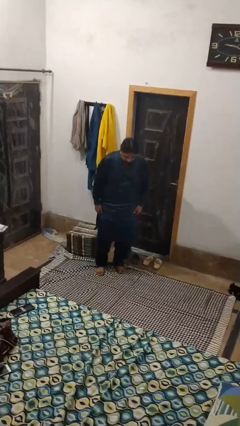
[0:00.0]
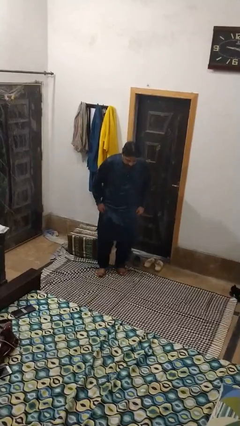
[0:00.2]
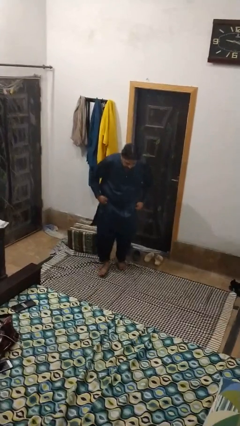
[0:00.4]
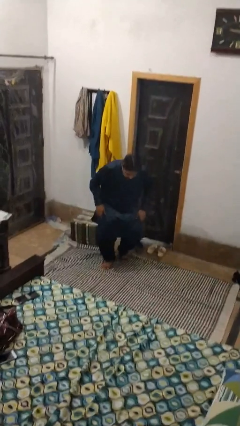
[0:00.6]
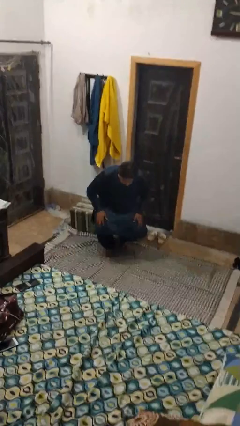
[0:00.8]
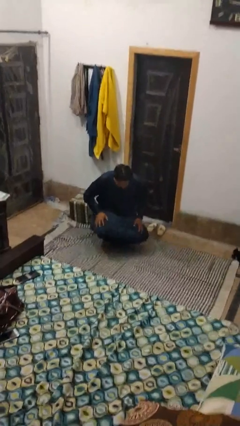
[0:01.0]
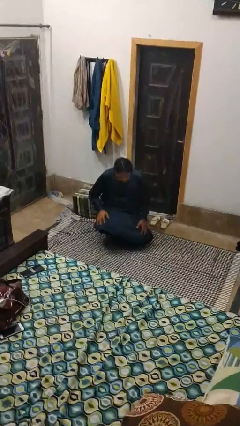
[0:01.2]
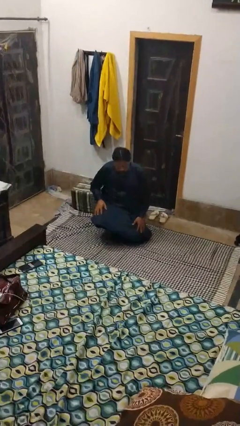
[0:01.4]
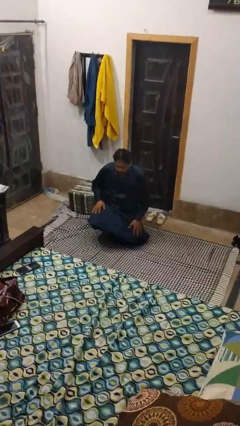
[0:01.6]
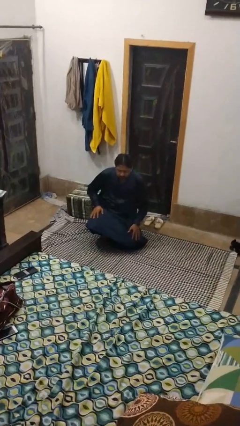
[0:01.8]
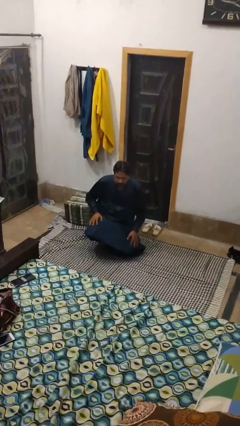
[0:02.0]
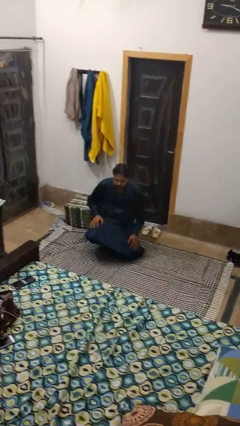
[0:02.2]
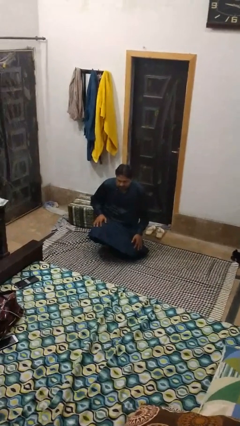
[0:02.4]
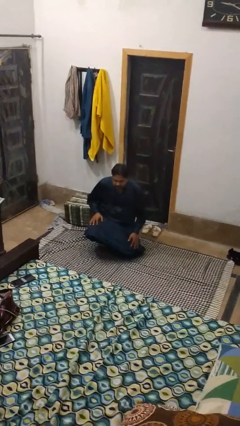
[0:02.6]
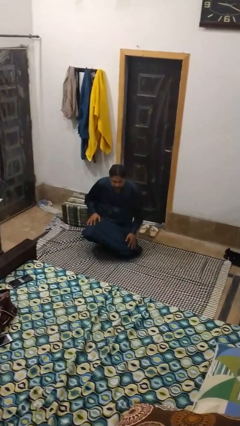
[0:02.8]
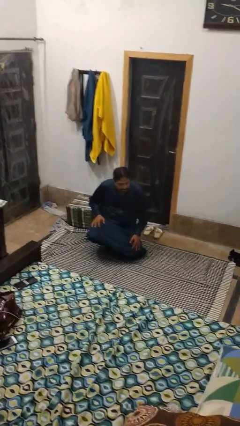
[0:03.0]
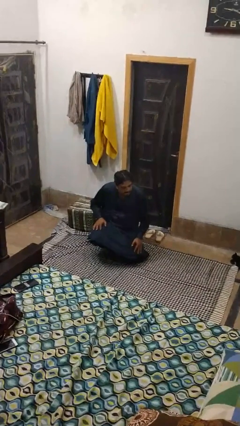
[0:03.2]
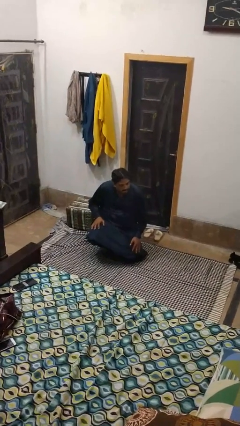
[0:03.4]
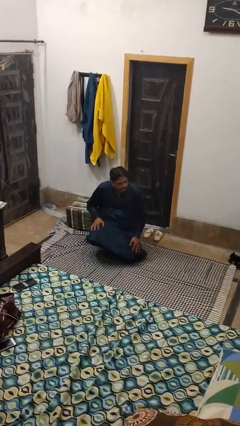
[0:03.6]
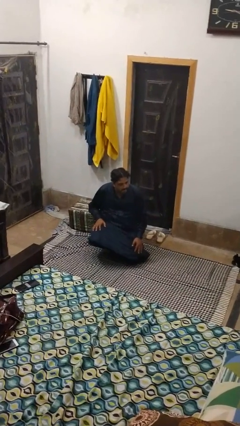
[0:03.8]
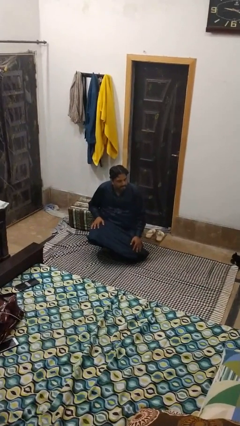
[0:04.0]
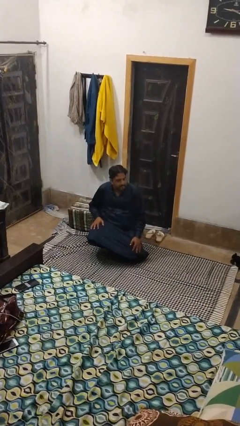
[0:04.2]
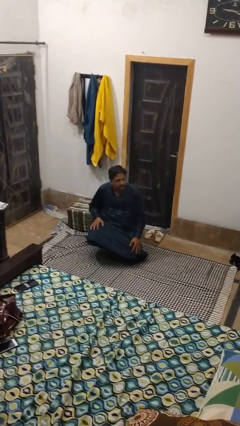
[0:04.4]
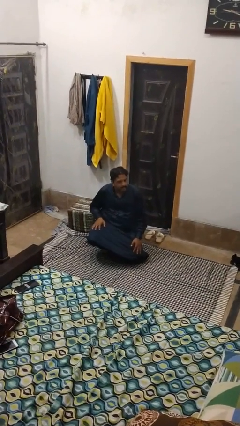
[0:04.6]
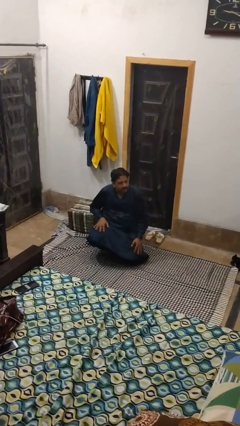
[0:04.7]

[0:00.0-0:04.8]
person kneels

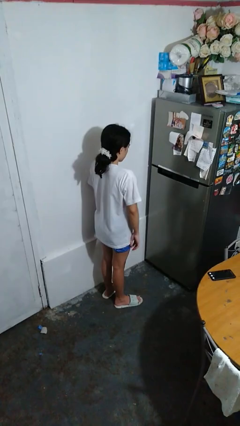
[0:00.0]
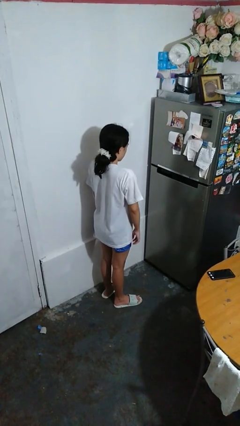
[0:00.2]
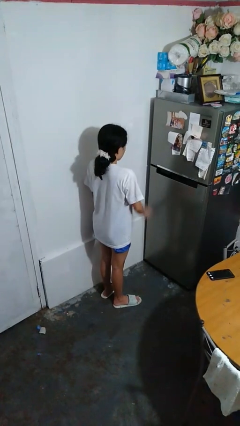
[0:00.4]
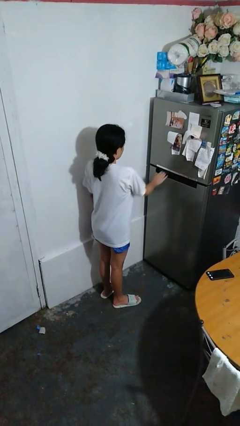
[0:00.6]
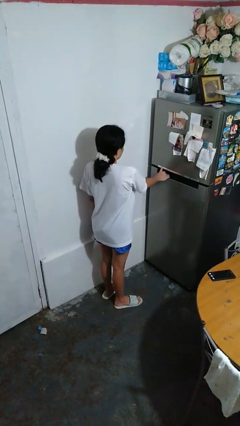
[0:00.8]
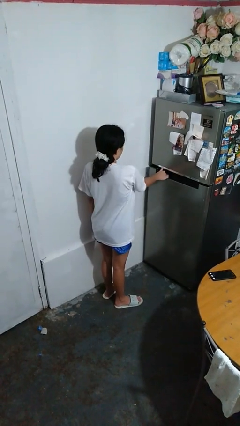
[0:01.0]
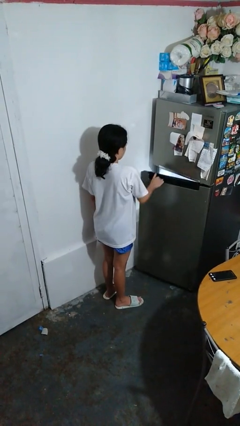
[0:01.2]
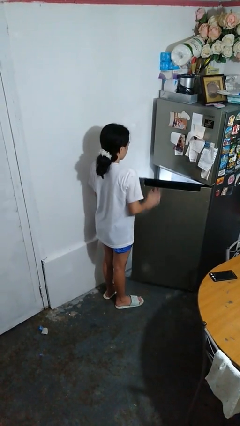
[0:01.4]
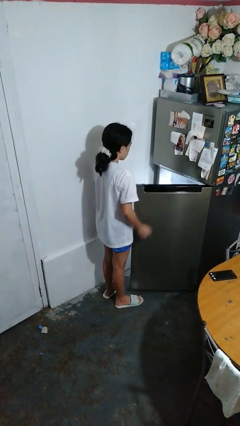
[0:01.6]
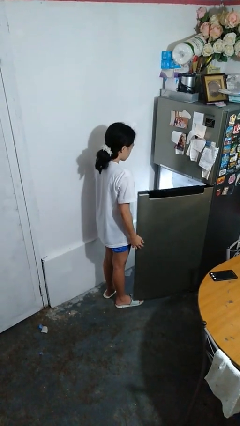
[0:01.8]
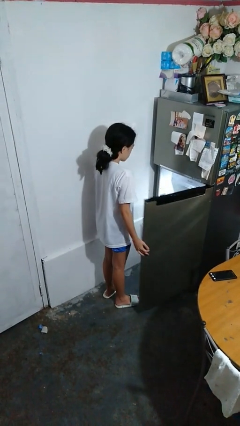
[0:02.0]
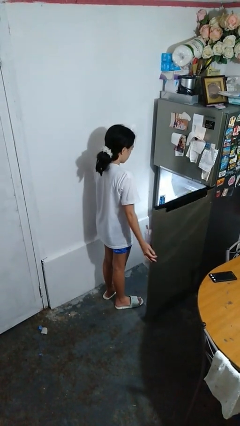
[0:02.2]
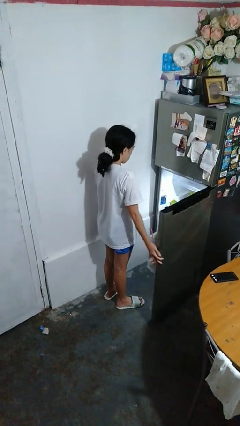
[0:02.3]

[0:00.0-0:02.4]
person opens refrigerator

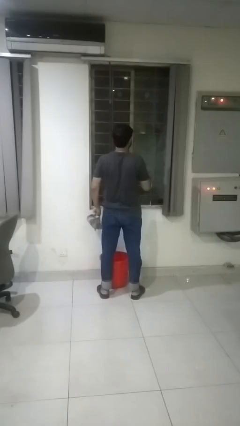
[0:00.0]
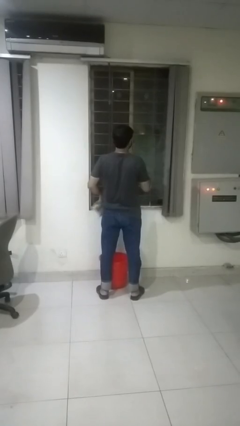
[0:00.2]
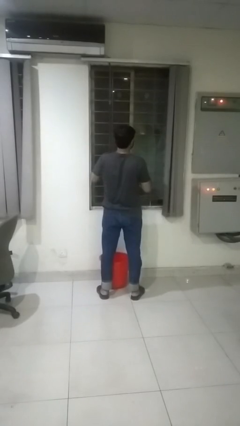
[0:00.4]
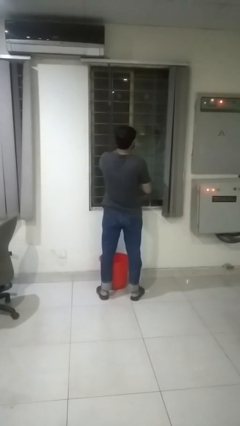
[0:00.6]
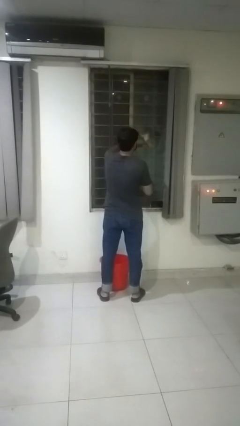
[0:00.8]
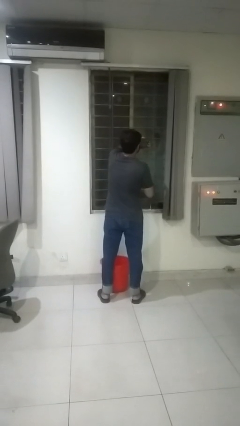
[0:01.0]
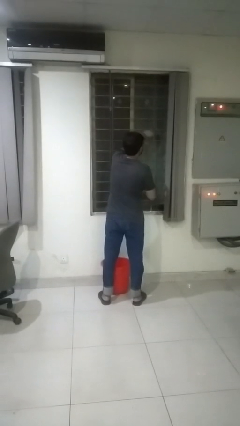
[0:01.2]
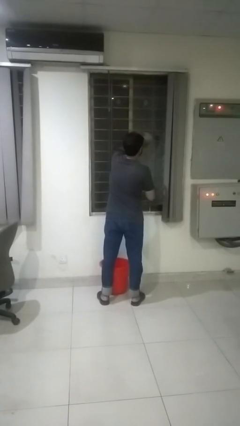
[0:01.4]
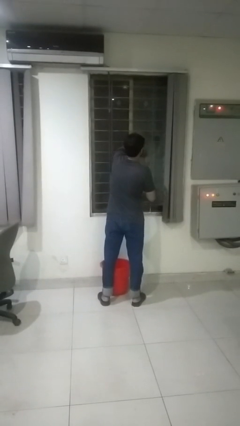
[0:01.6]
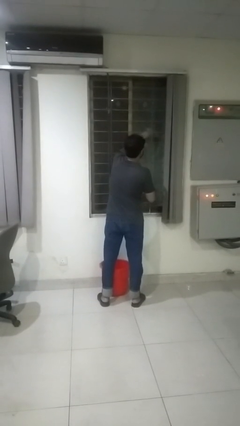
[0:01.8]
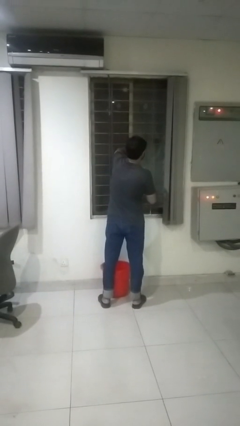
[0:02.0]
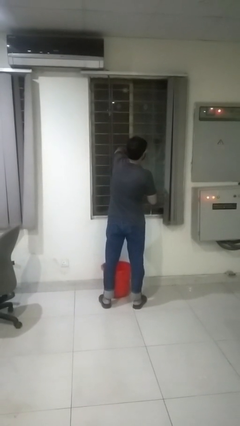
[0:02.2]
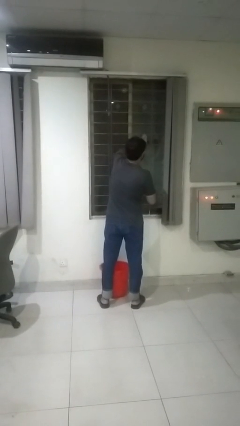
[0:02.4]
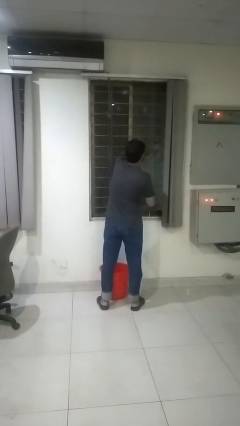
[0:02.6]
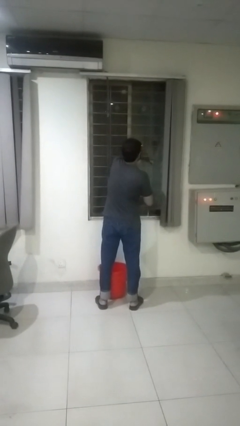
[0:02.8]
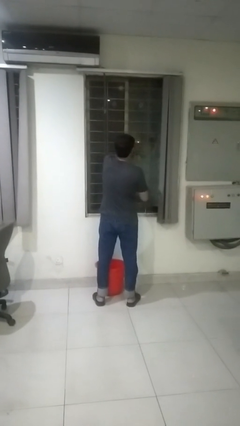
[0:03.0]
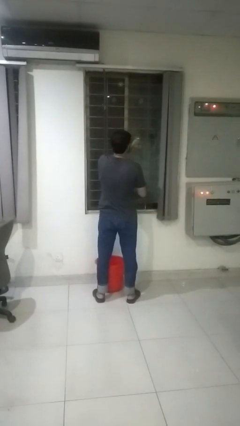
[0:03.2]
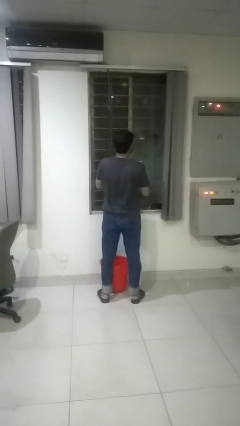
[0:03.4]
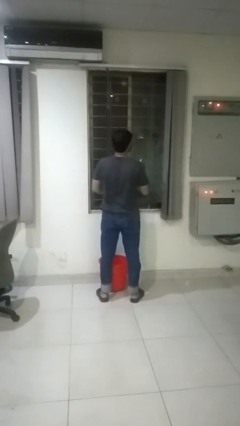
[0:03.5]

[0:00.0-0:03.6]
person washes window

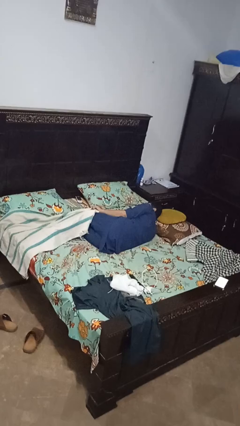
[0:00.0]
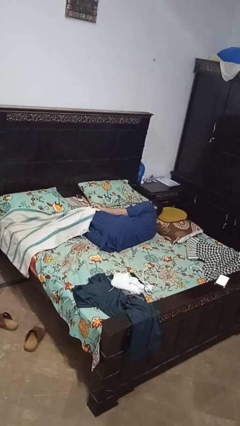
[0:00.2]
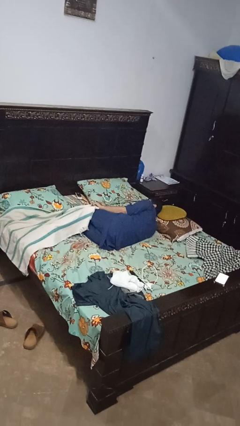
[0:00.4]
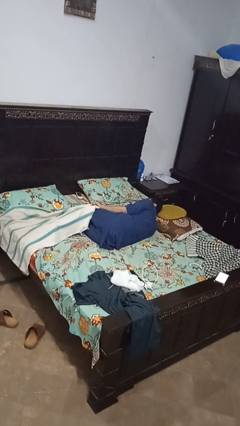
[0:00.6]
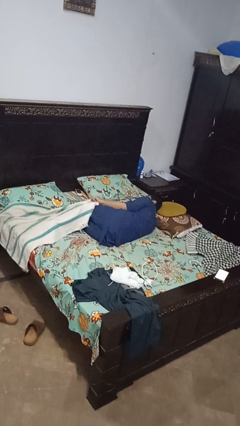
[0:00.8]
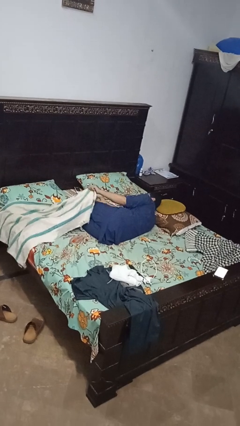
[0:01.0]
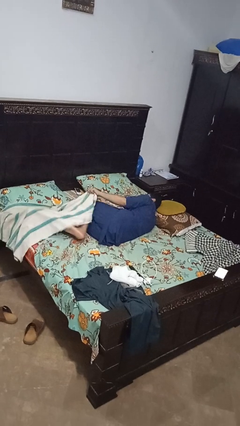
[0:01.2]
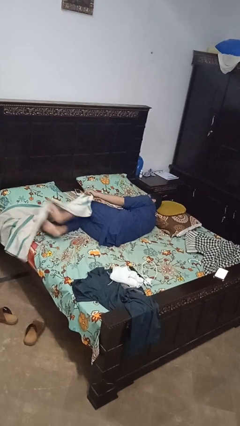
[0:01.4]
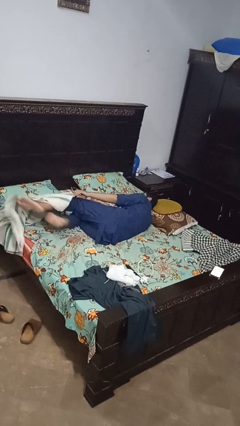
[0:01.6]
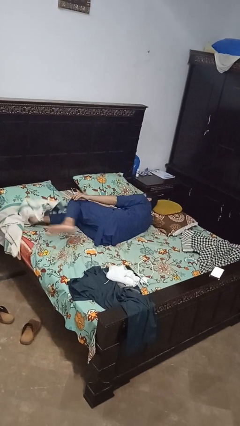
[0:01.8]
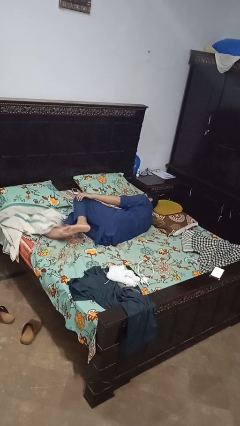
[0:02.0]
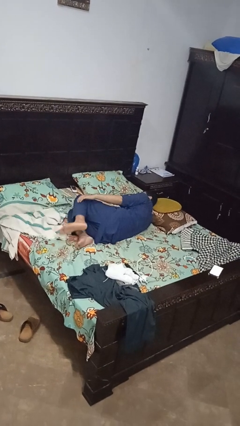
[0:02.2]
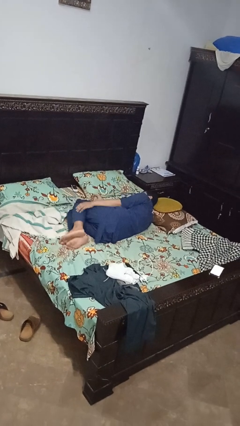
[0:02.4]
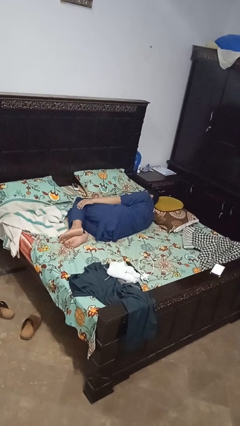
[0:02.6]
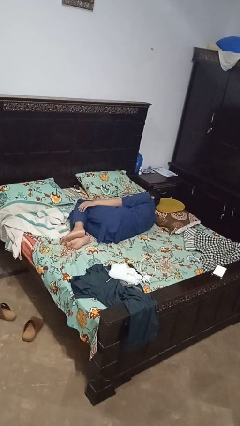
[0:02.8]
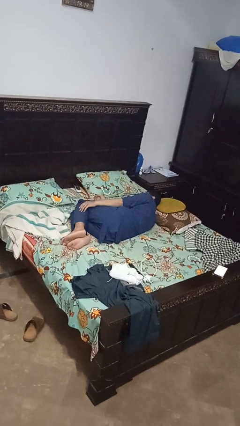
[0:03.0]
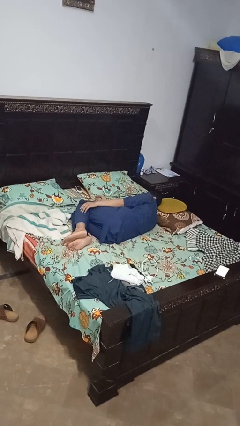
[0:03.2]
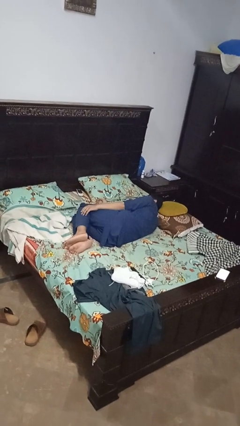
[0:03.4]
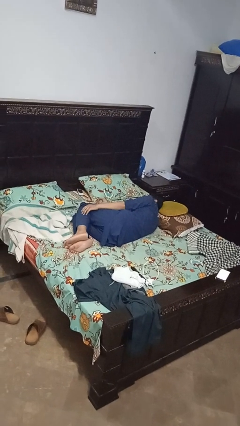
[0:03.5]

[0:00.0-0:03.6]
person uncovers with bedsheets

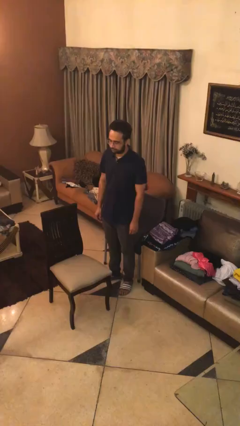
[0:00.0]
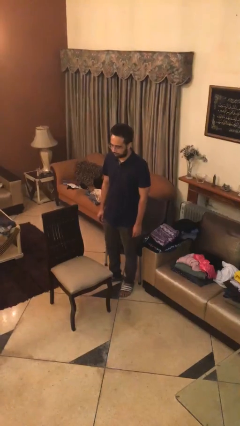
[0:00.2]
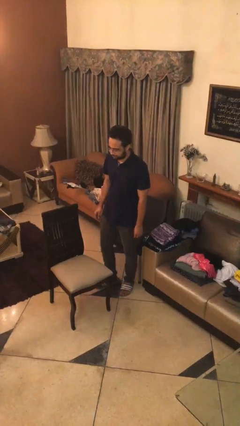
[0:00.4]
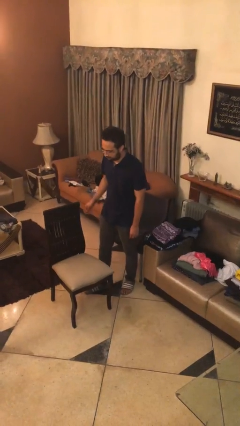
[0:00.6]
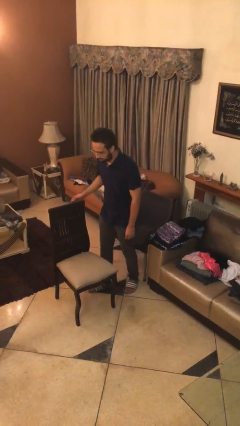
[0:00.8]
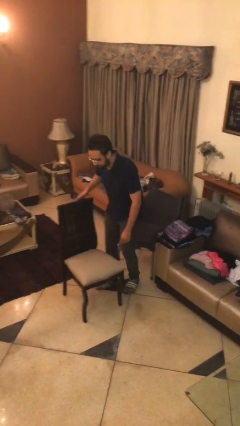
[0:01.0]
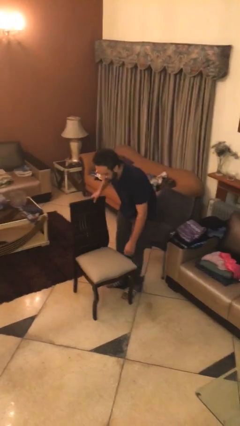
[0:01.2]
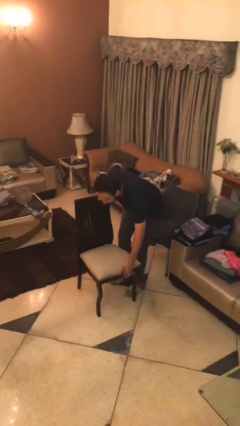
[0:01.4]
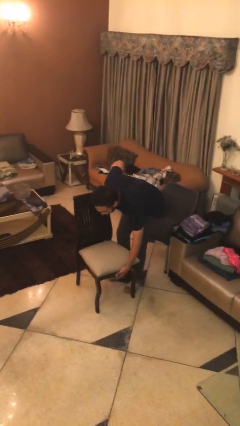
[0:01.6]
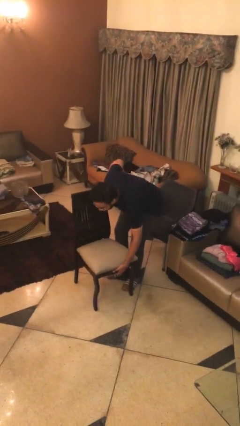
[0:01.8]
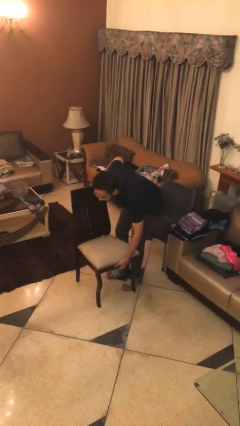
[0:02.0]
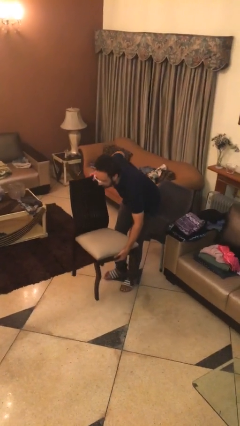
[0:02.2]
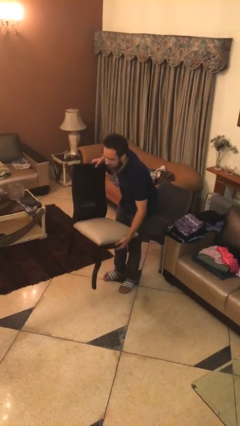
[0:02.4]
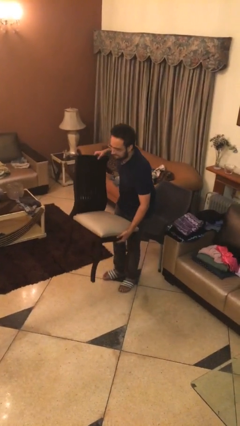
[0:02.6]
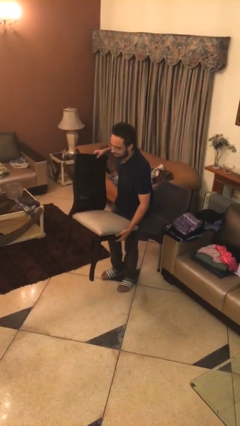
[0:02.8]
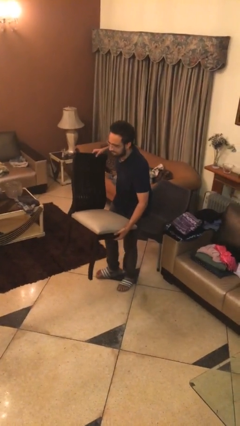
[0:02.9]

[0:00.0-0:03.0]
person picks up object from floor
